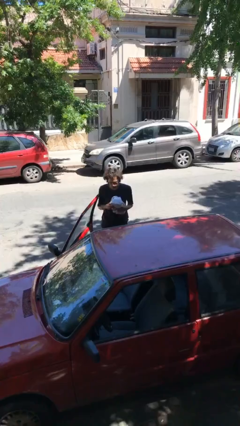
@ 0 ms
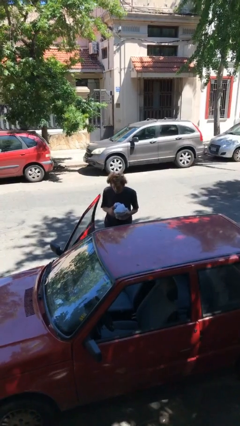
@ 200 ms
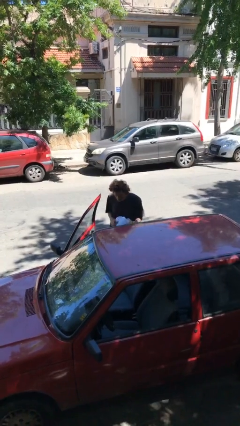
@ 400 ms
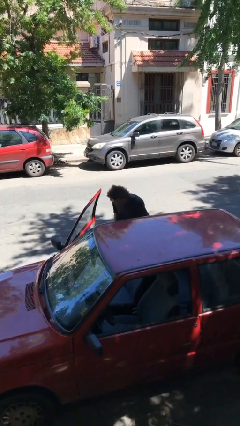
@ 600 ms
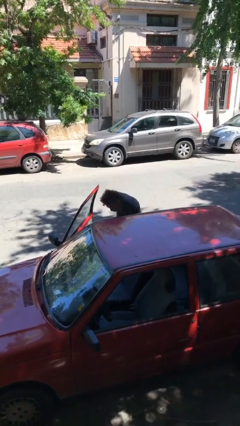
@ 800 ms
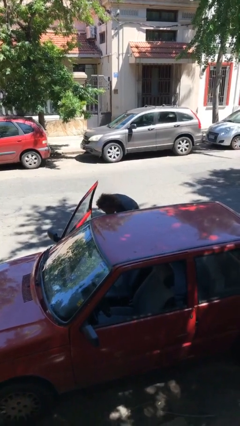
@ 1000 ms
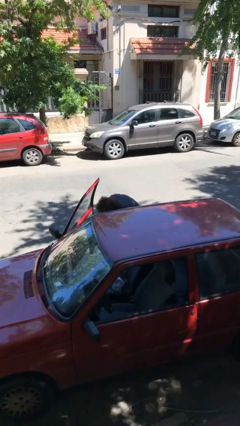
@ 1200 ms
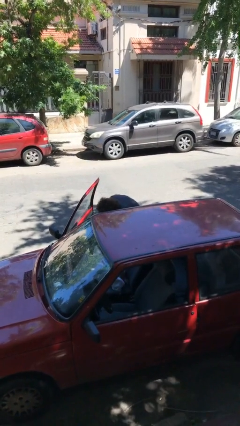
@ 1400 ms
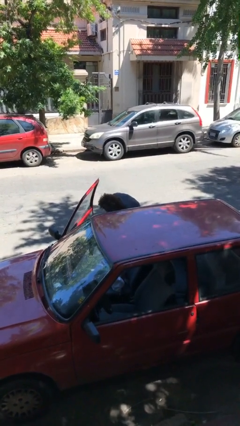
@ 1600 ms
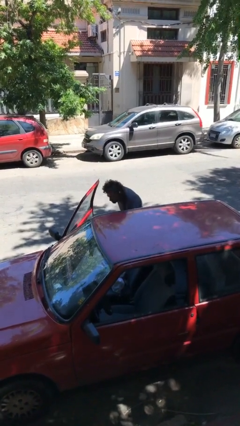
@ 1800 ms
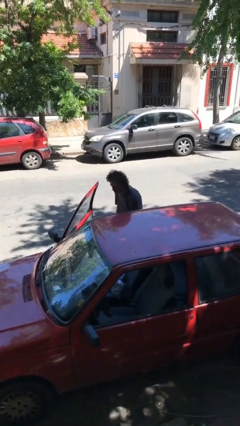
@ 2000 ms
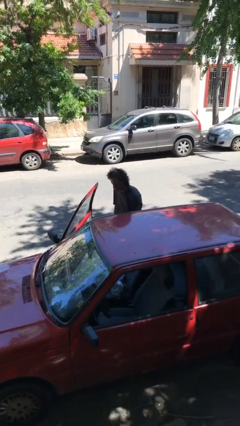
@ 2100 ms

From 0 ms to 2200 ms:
person loads car

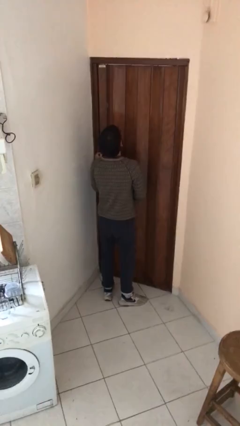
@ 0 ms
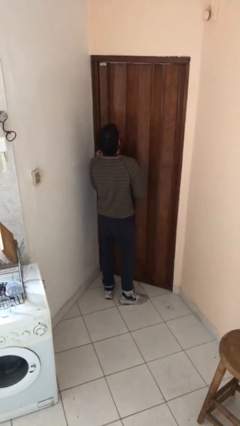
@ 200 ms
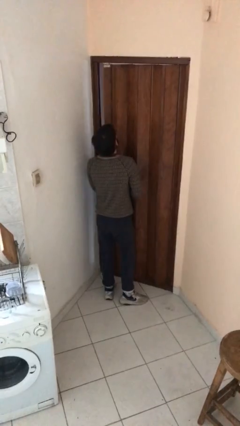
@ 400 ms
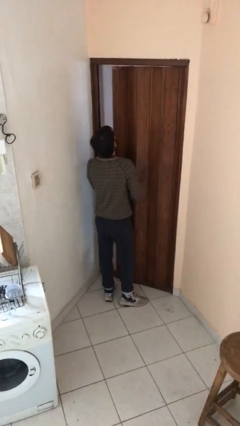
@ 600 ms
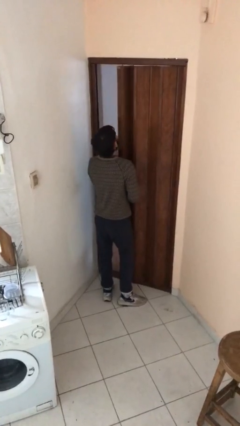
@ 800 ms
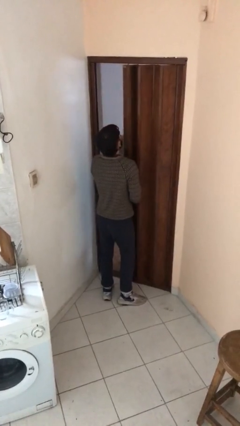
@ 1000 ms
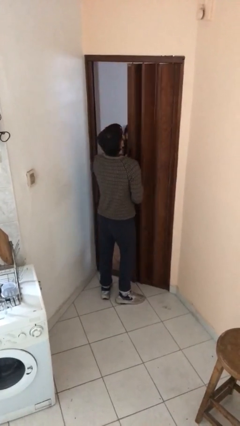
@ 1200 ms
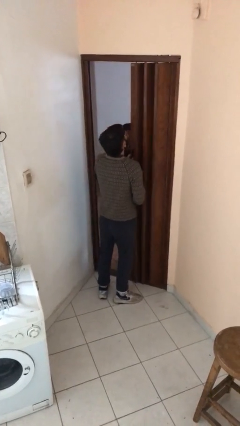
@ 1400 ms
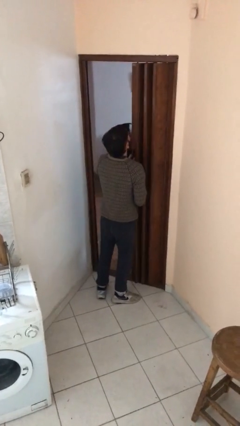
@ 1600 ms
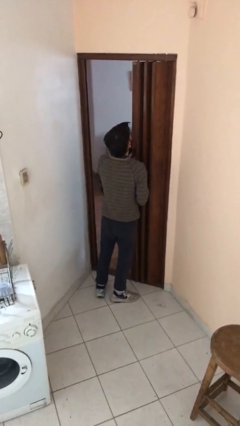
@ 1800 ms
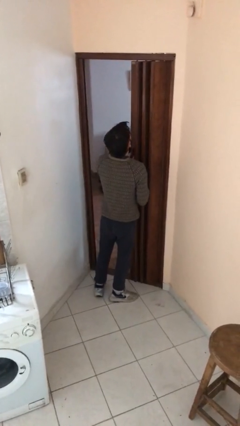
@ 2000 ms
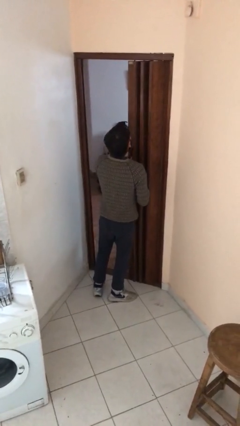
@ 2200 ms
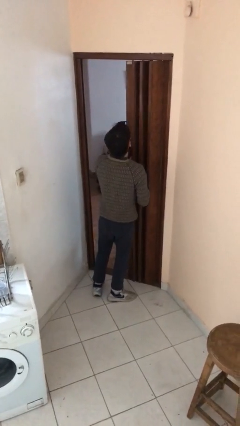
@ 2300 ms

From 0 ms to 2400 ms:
person opens sliding door

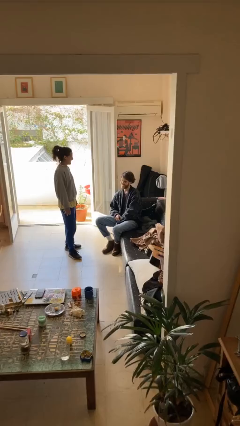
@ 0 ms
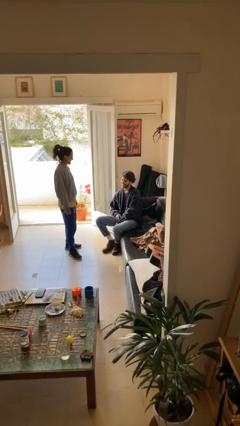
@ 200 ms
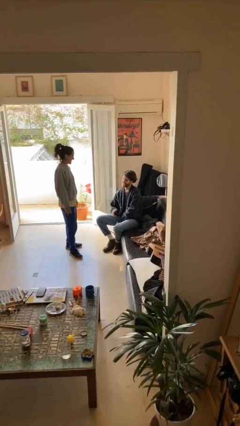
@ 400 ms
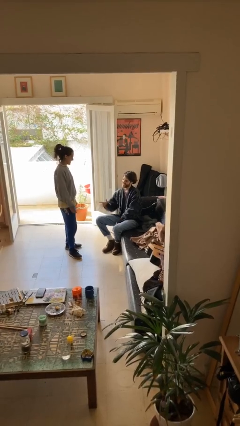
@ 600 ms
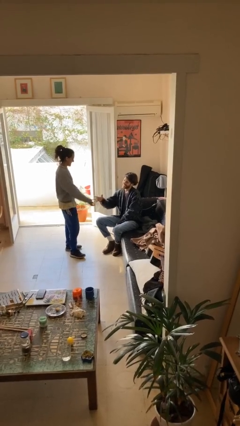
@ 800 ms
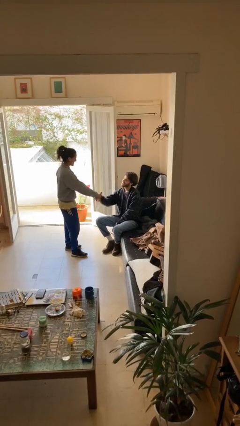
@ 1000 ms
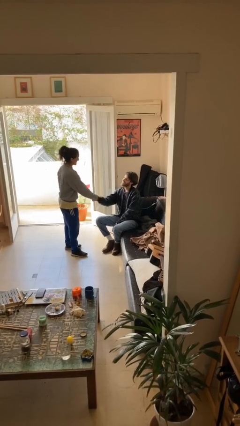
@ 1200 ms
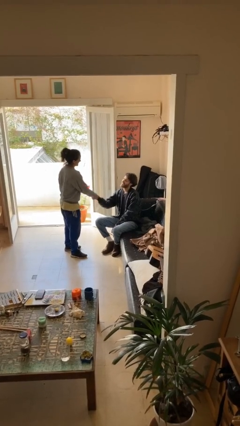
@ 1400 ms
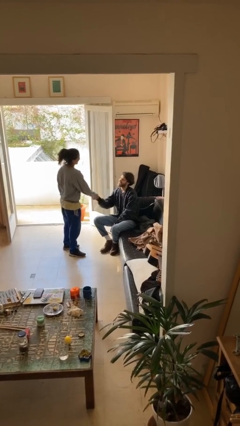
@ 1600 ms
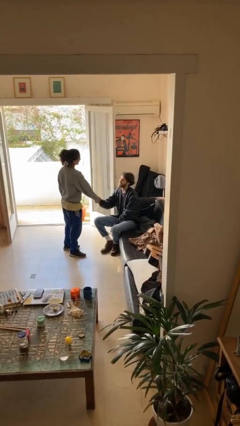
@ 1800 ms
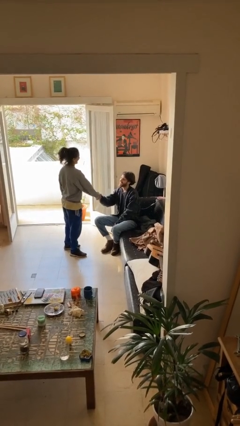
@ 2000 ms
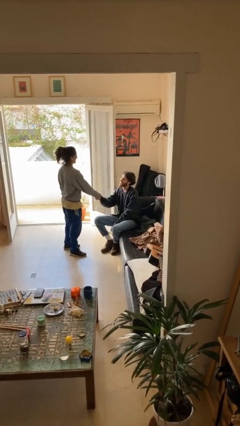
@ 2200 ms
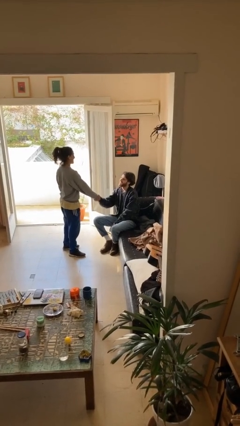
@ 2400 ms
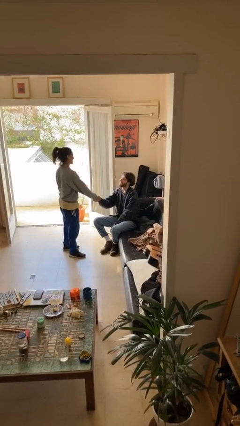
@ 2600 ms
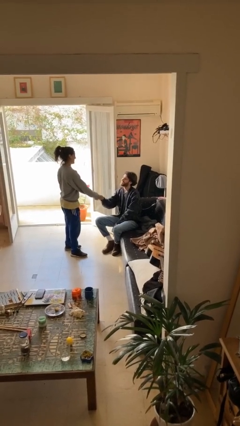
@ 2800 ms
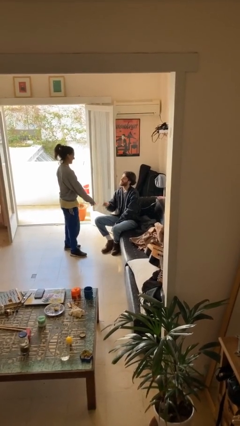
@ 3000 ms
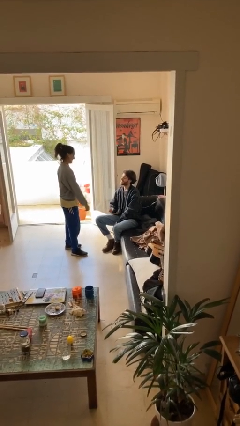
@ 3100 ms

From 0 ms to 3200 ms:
person shakes hand

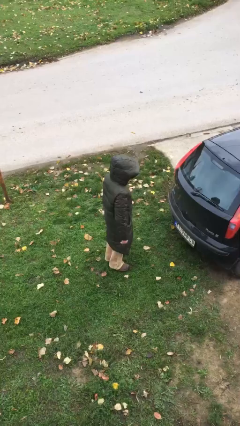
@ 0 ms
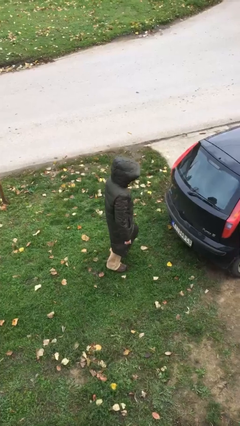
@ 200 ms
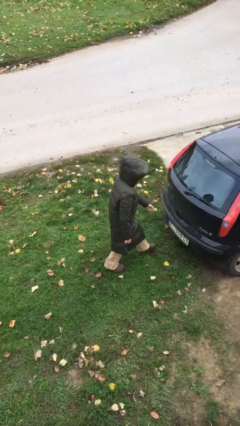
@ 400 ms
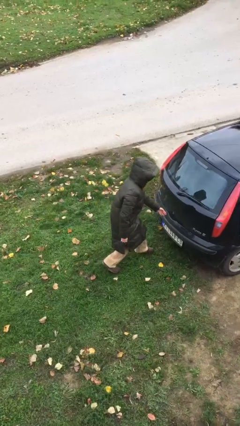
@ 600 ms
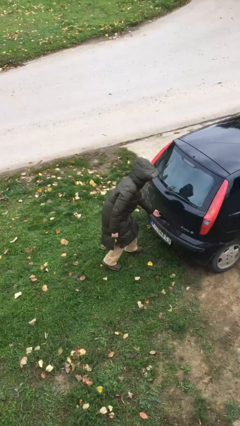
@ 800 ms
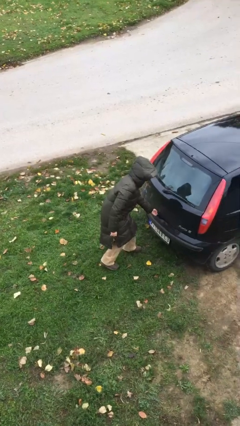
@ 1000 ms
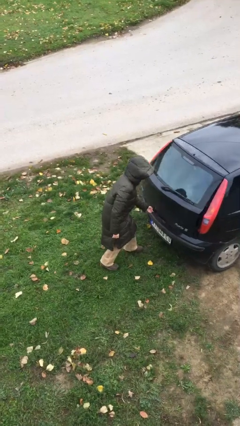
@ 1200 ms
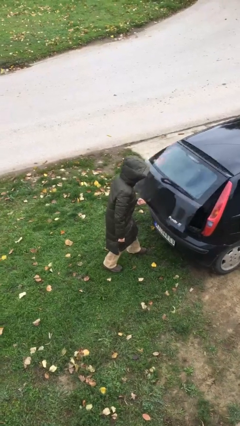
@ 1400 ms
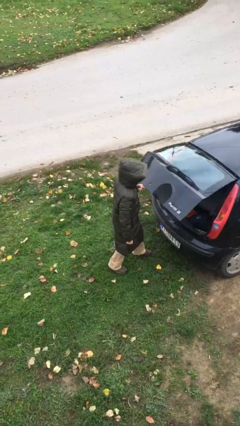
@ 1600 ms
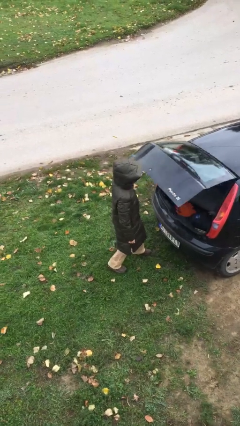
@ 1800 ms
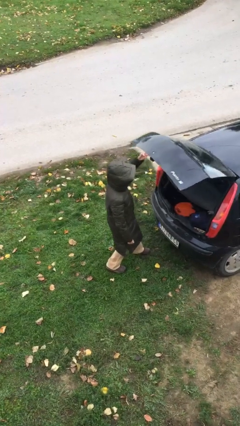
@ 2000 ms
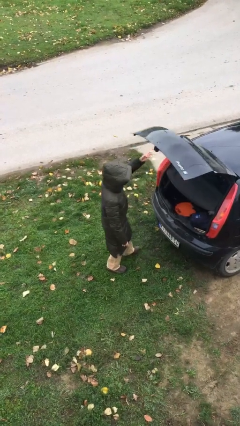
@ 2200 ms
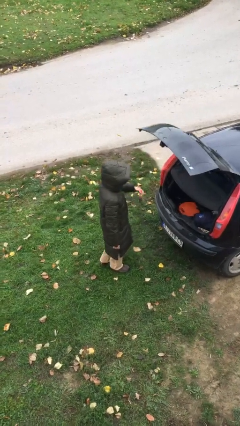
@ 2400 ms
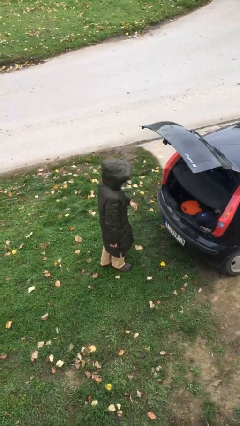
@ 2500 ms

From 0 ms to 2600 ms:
person opens car trunk

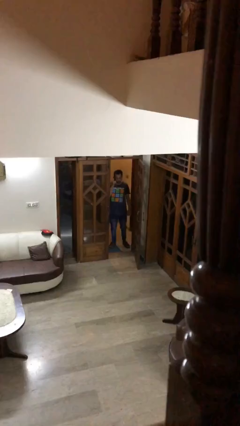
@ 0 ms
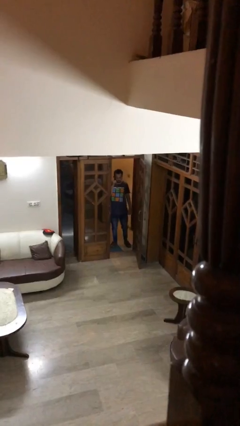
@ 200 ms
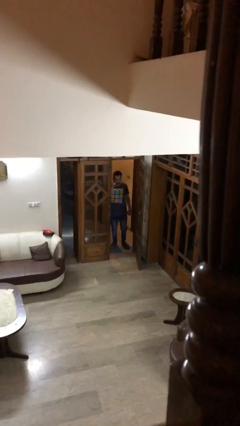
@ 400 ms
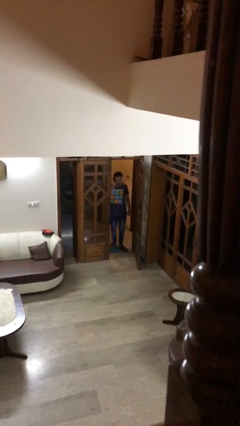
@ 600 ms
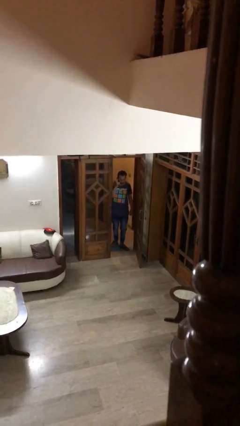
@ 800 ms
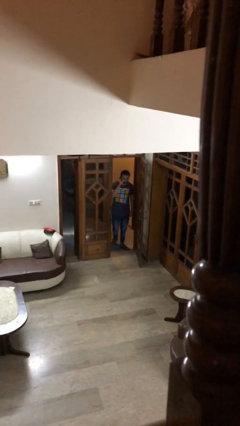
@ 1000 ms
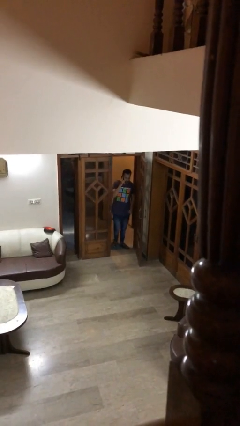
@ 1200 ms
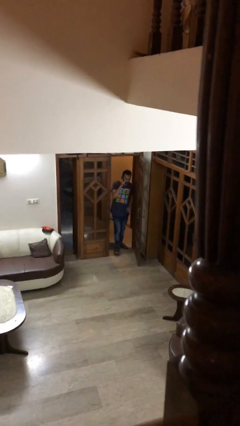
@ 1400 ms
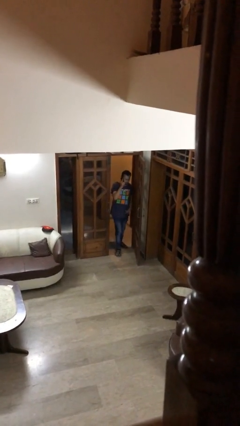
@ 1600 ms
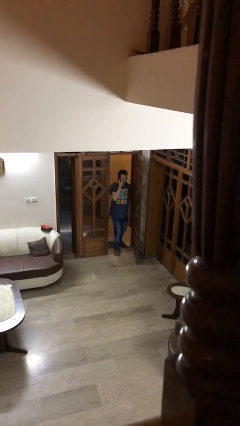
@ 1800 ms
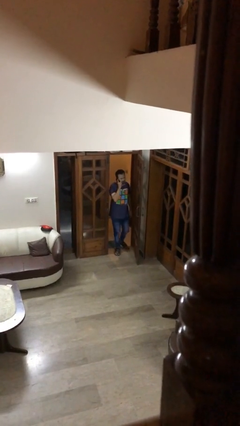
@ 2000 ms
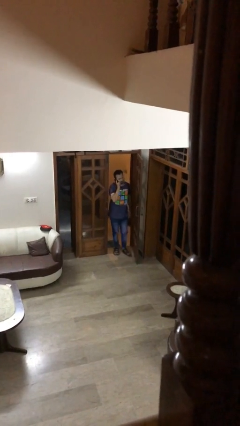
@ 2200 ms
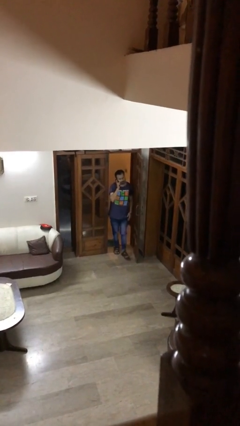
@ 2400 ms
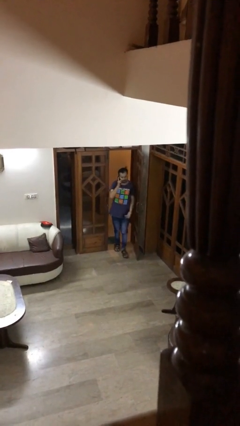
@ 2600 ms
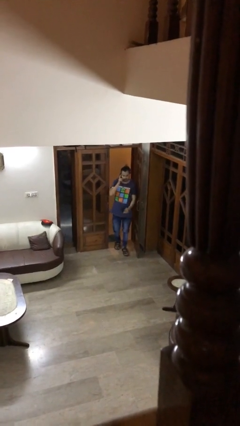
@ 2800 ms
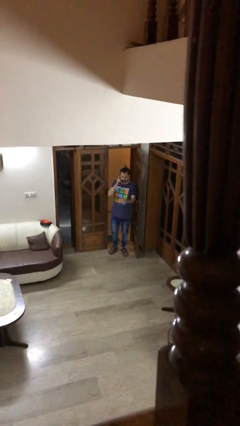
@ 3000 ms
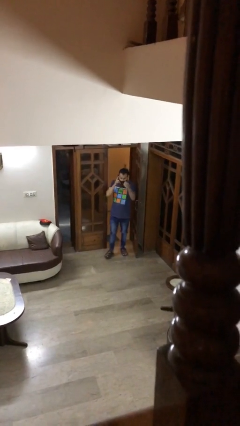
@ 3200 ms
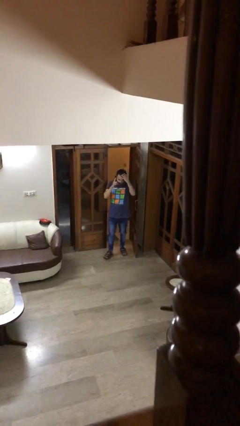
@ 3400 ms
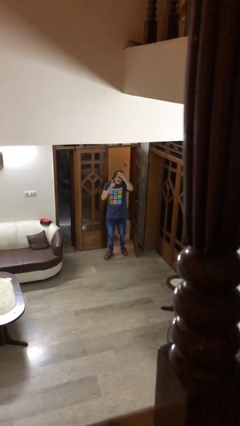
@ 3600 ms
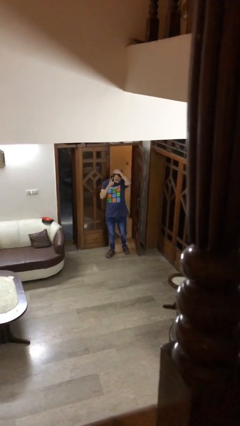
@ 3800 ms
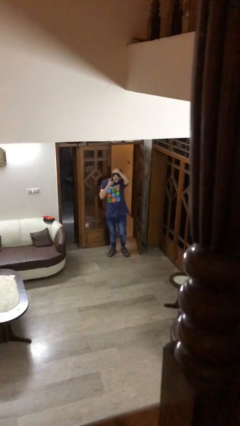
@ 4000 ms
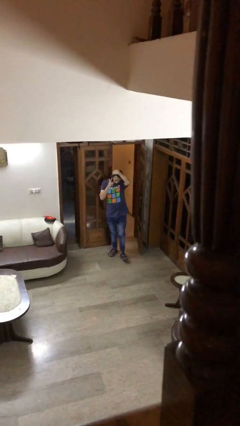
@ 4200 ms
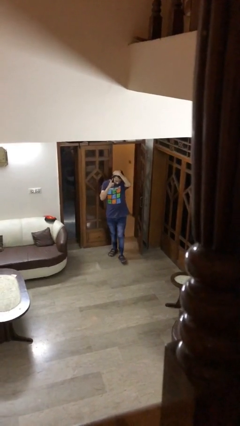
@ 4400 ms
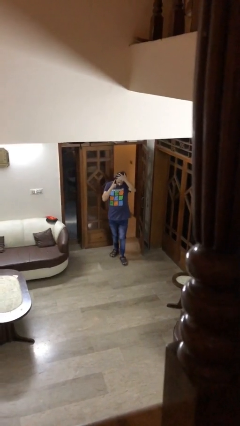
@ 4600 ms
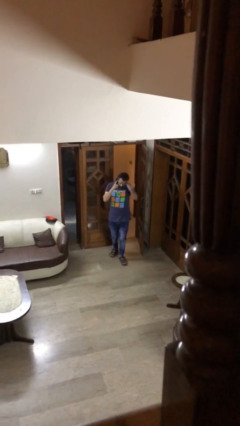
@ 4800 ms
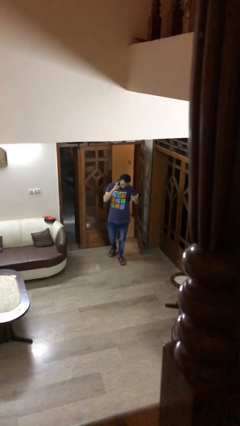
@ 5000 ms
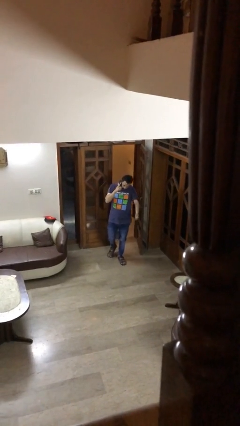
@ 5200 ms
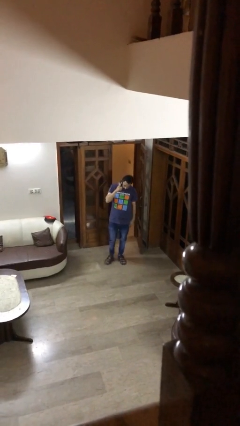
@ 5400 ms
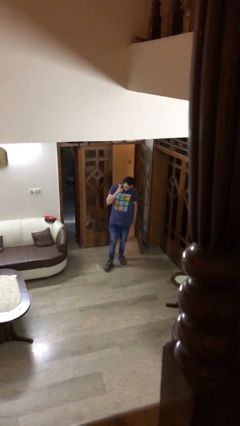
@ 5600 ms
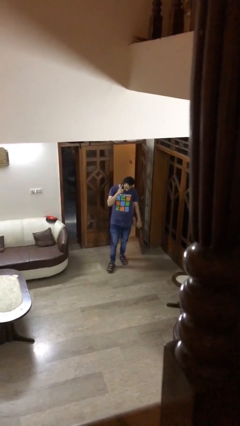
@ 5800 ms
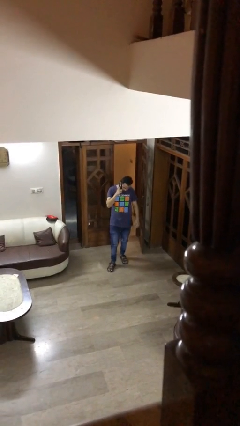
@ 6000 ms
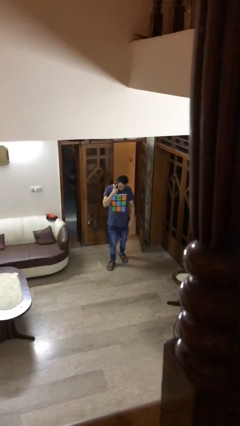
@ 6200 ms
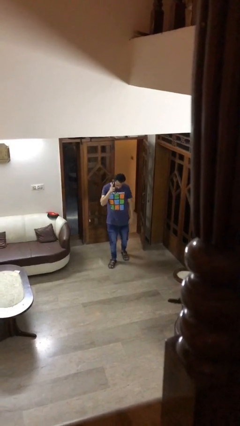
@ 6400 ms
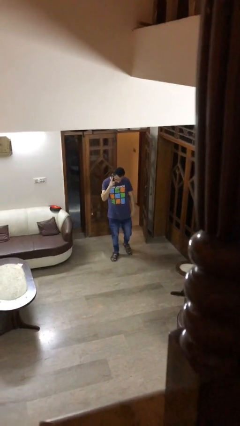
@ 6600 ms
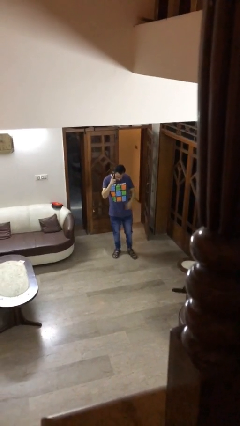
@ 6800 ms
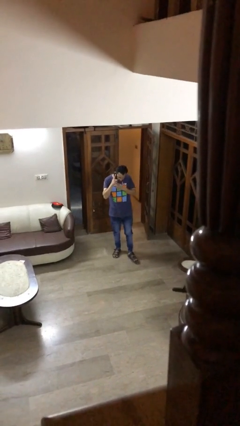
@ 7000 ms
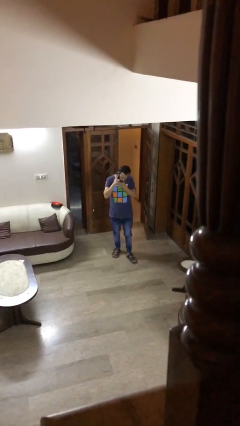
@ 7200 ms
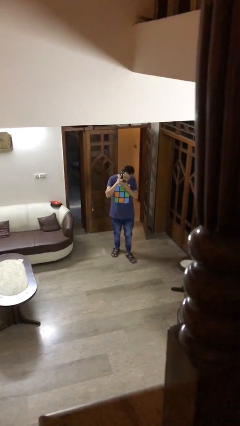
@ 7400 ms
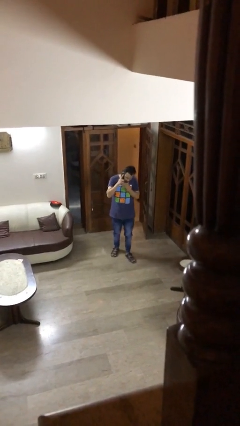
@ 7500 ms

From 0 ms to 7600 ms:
person enters scene through structure
